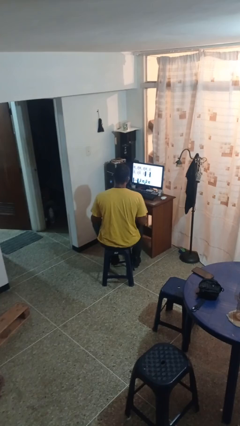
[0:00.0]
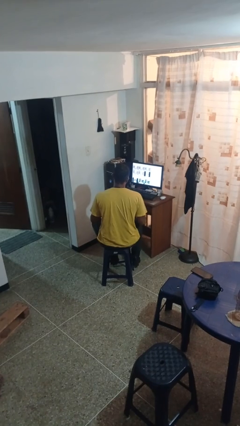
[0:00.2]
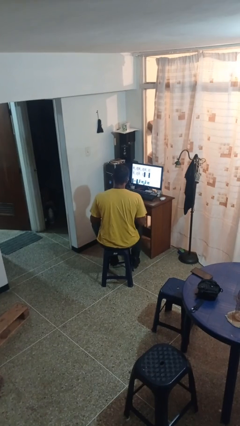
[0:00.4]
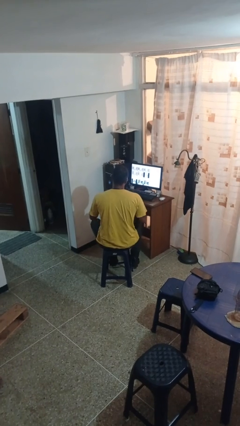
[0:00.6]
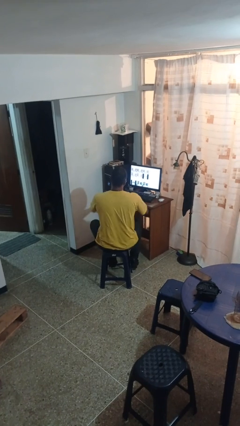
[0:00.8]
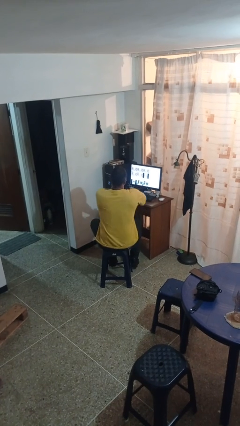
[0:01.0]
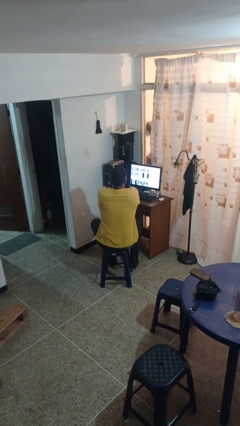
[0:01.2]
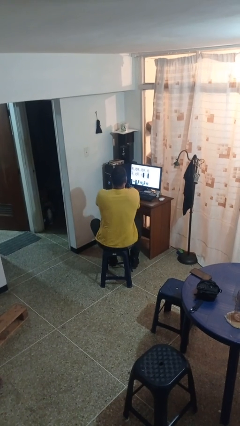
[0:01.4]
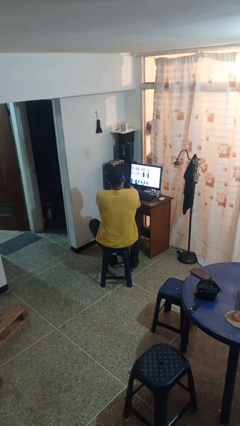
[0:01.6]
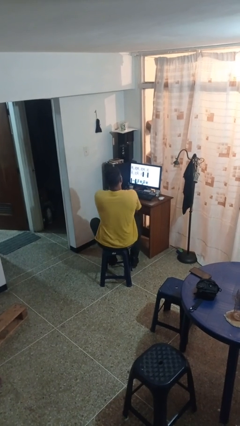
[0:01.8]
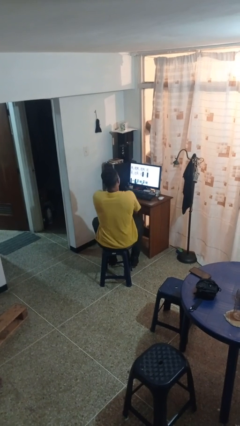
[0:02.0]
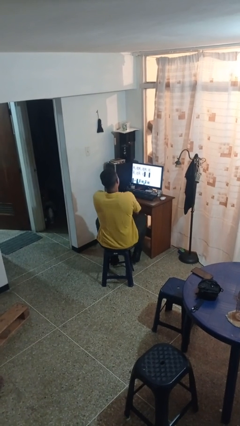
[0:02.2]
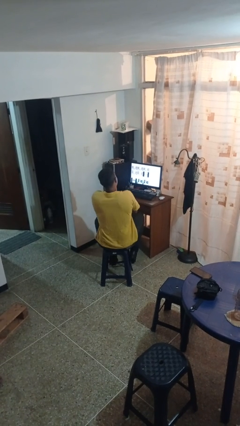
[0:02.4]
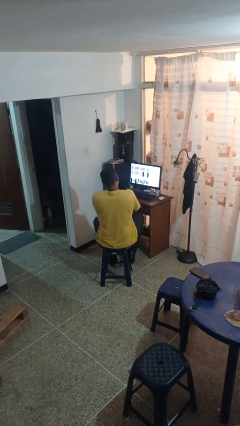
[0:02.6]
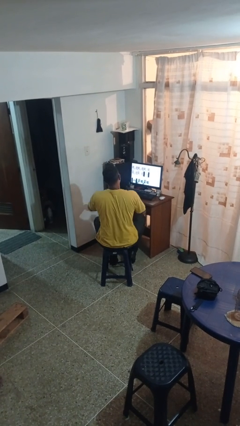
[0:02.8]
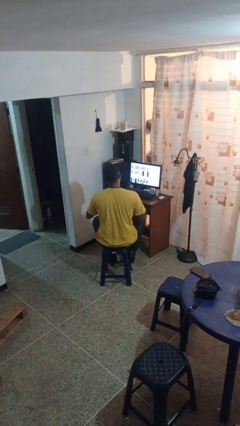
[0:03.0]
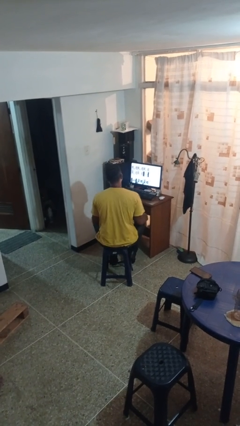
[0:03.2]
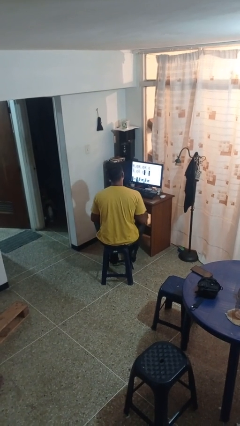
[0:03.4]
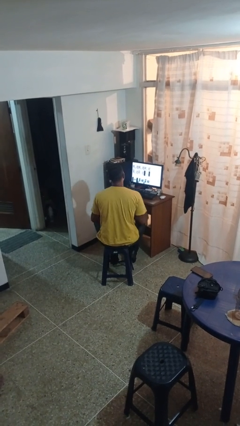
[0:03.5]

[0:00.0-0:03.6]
person crosses arms

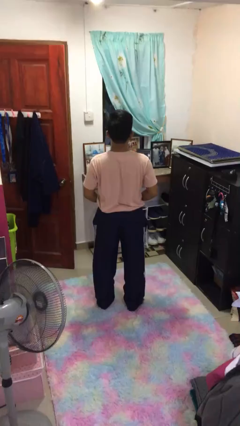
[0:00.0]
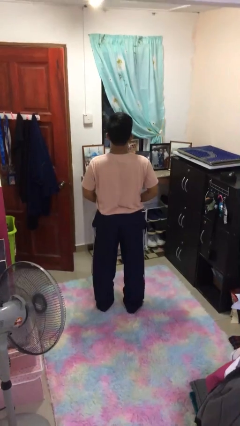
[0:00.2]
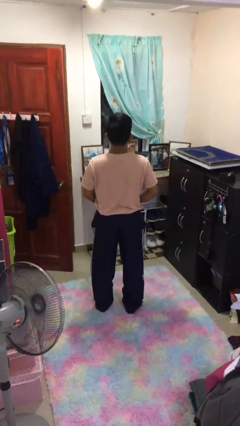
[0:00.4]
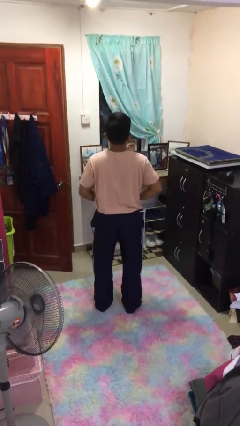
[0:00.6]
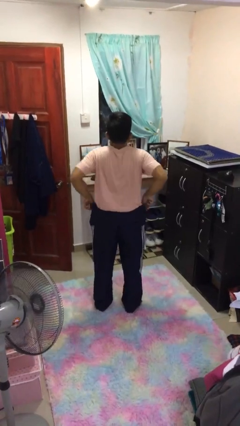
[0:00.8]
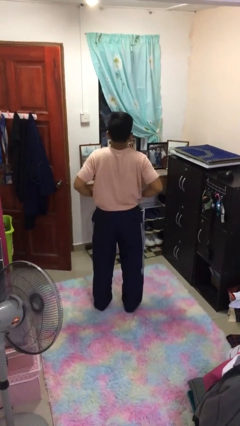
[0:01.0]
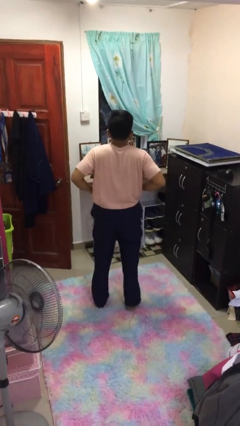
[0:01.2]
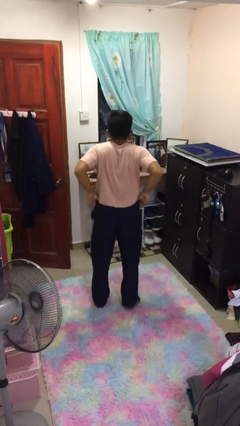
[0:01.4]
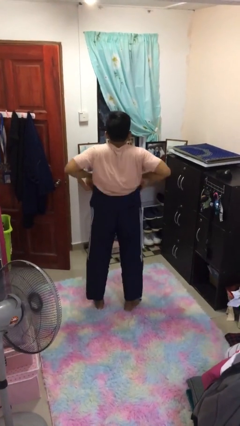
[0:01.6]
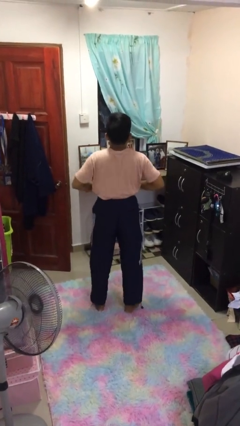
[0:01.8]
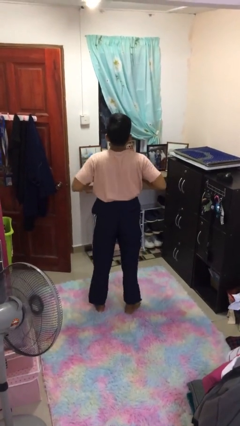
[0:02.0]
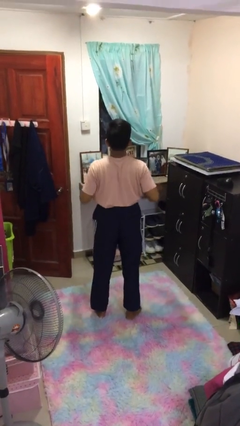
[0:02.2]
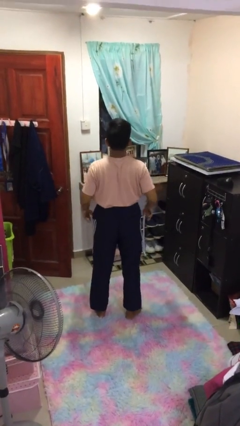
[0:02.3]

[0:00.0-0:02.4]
person hikes up pants

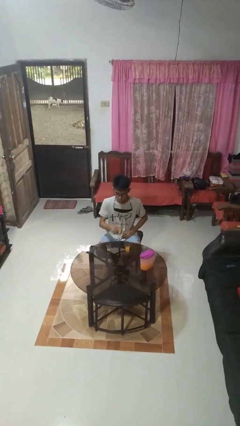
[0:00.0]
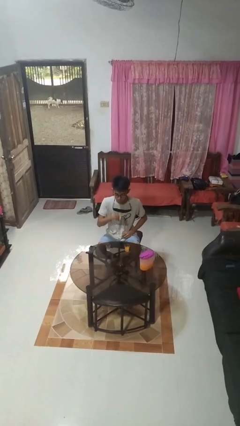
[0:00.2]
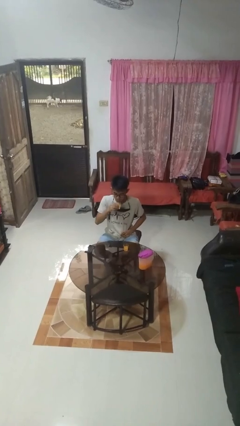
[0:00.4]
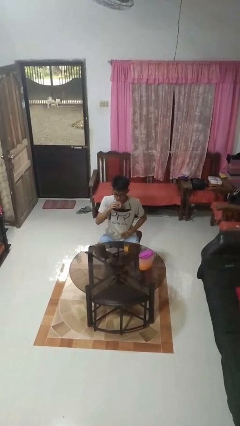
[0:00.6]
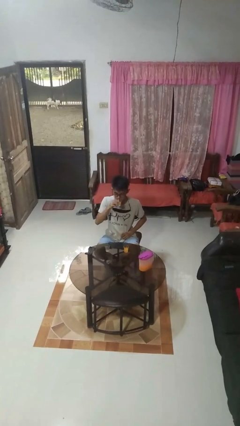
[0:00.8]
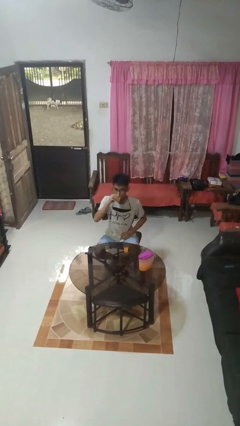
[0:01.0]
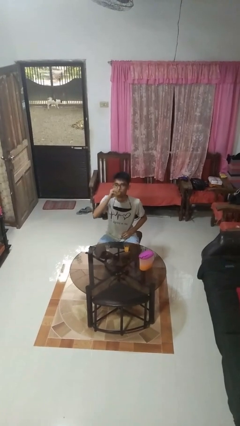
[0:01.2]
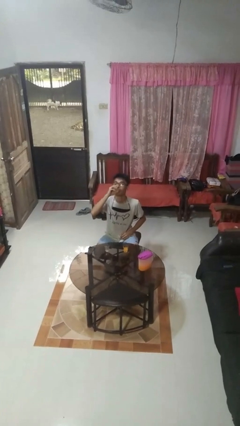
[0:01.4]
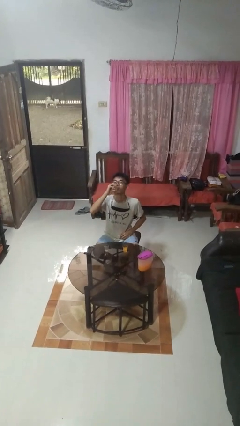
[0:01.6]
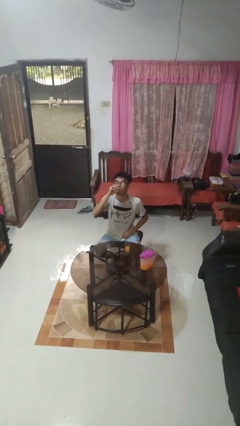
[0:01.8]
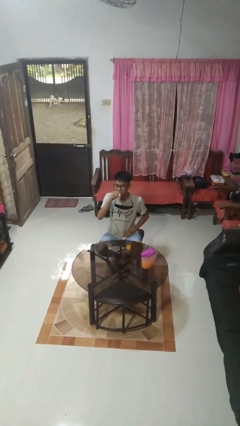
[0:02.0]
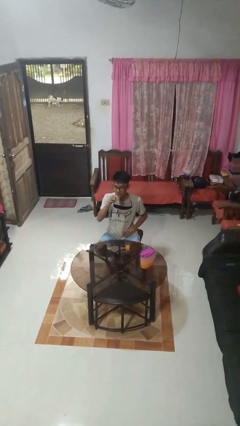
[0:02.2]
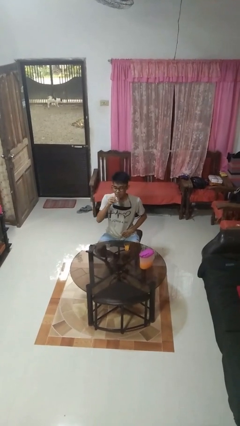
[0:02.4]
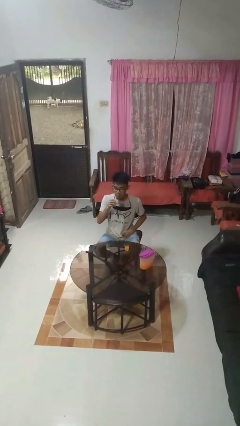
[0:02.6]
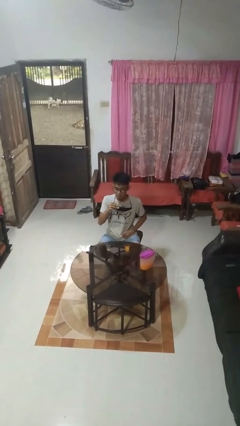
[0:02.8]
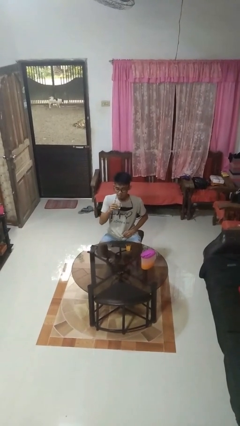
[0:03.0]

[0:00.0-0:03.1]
person drinks from shotglass

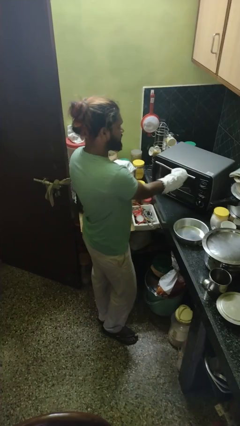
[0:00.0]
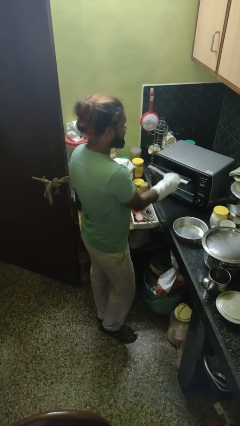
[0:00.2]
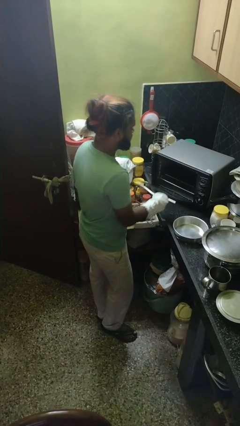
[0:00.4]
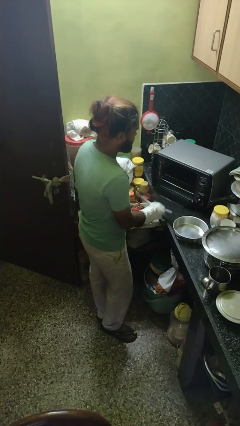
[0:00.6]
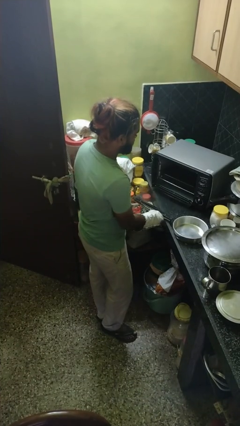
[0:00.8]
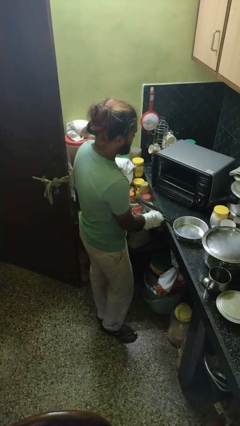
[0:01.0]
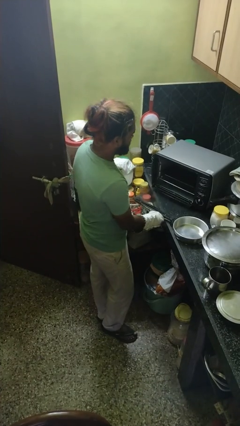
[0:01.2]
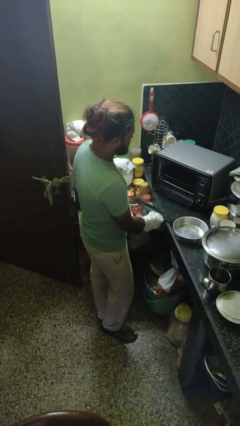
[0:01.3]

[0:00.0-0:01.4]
person opens oven door

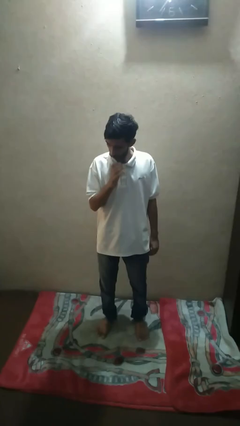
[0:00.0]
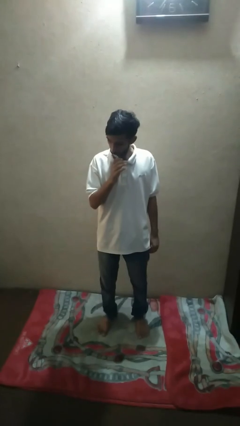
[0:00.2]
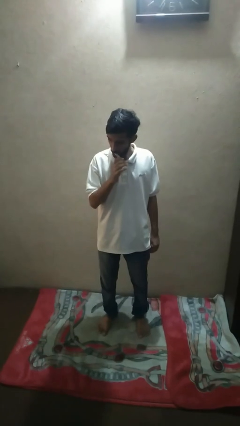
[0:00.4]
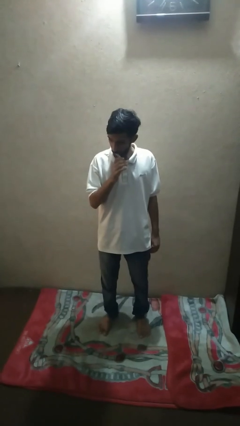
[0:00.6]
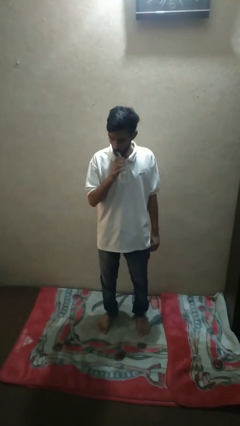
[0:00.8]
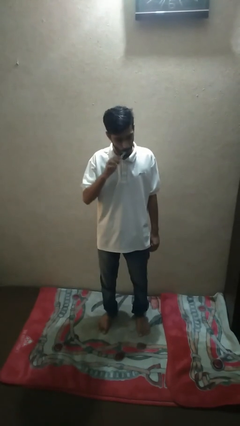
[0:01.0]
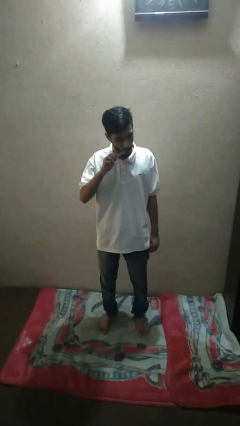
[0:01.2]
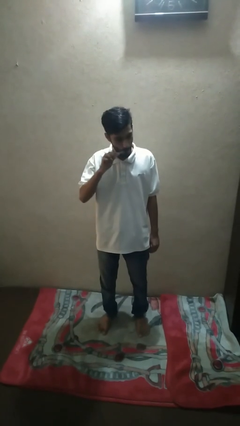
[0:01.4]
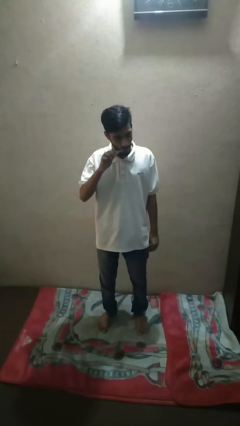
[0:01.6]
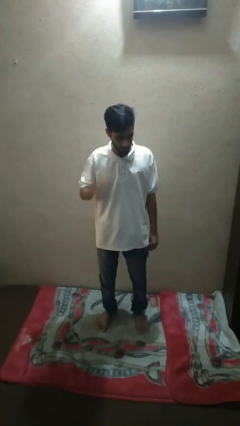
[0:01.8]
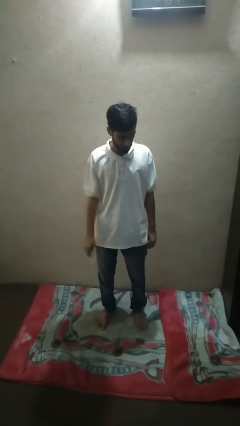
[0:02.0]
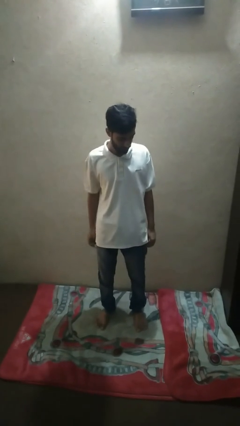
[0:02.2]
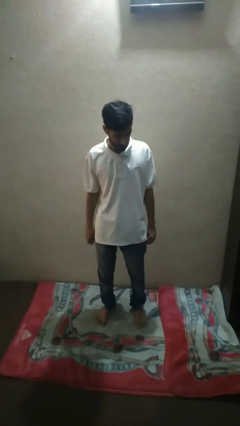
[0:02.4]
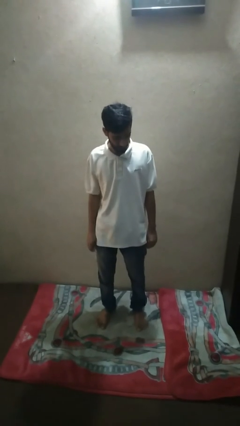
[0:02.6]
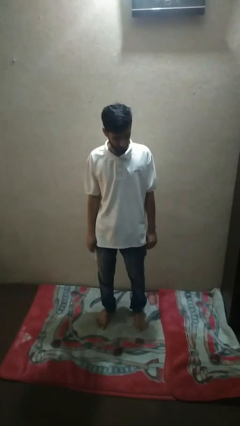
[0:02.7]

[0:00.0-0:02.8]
person brushes teeth

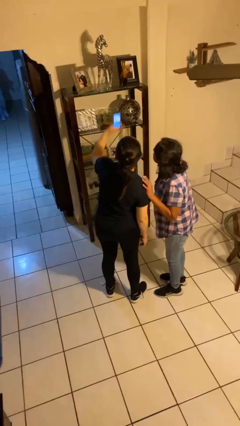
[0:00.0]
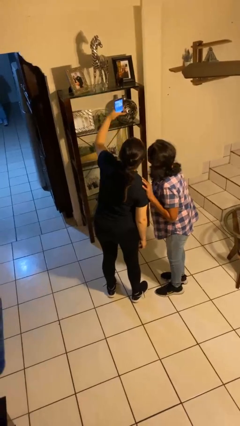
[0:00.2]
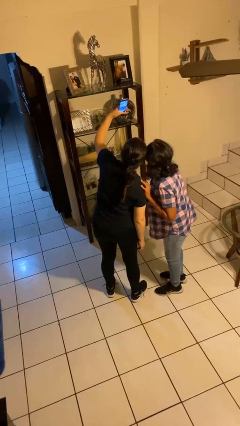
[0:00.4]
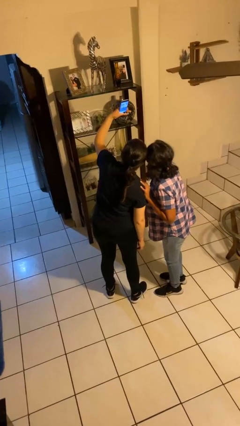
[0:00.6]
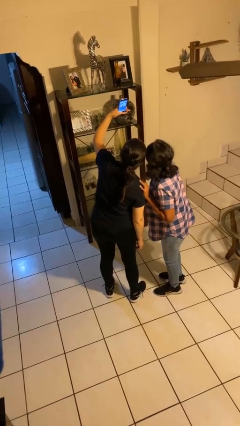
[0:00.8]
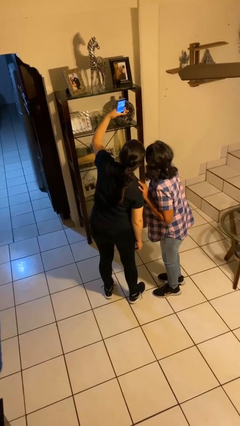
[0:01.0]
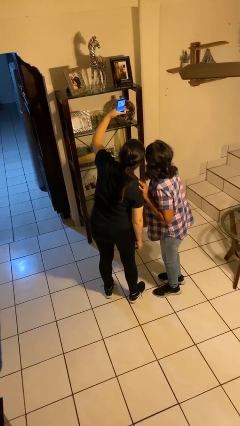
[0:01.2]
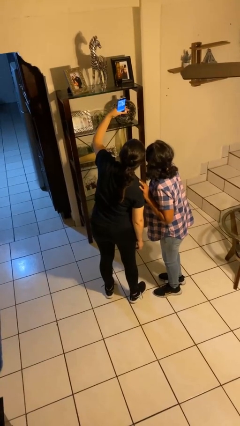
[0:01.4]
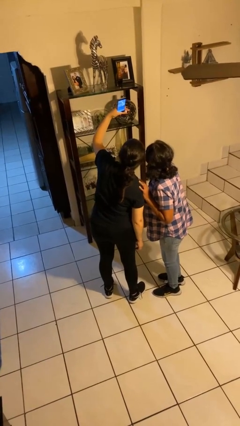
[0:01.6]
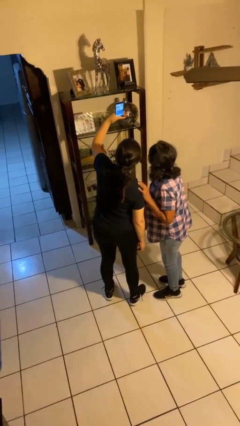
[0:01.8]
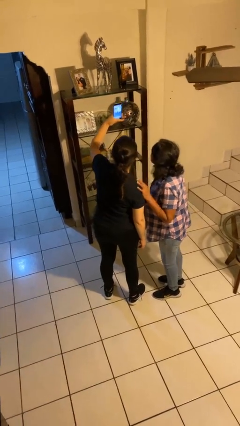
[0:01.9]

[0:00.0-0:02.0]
person takes selfie with person

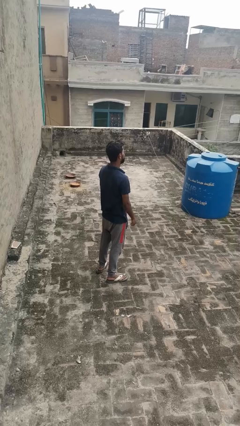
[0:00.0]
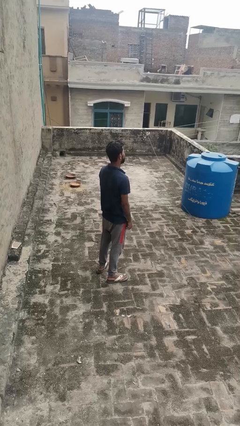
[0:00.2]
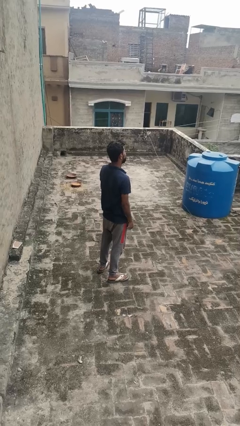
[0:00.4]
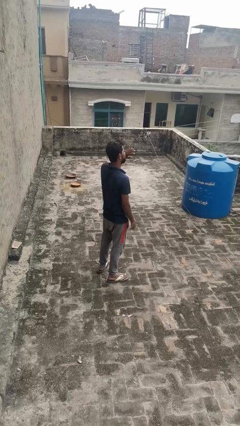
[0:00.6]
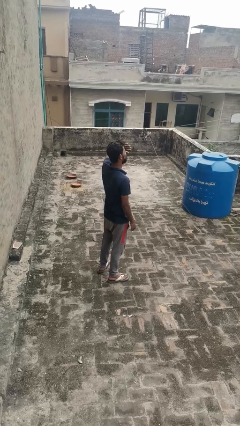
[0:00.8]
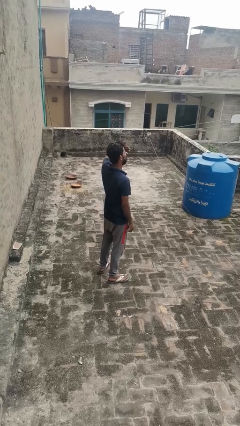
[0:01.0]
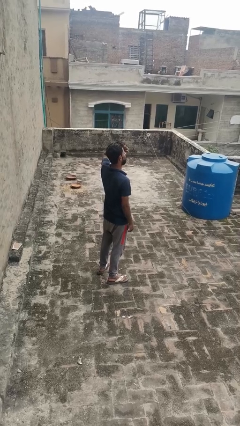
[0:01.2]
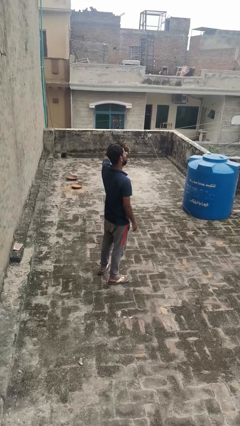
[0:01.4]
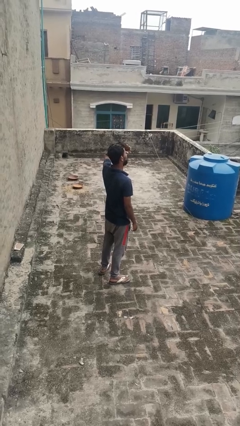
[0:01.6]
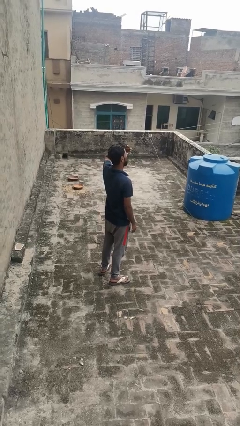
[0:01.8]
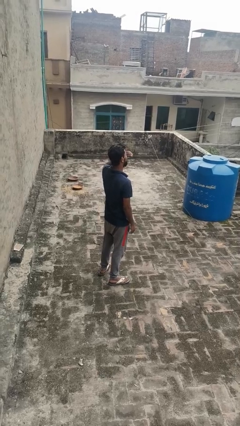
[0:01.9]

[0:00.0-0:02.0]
person shades eyes
